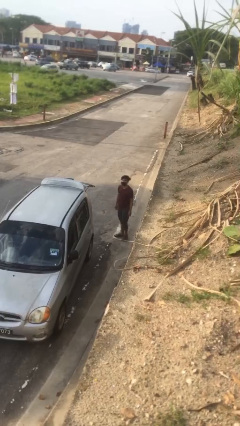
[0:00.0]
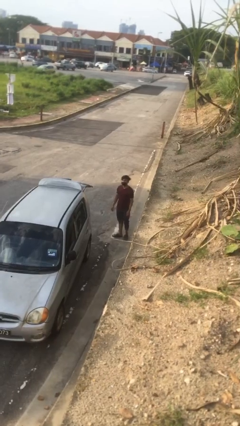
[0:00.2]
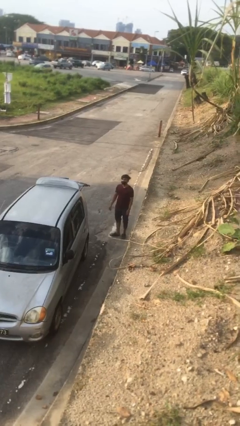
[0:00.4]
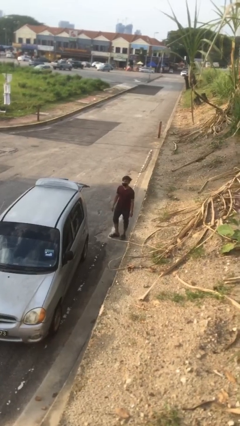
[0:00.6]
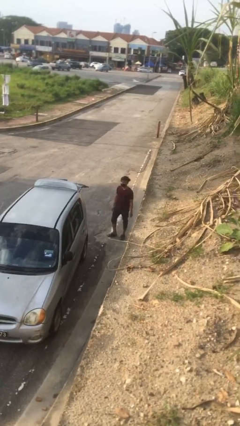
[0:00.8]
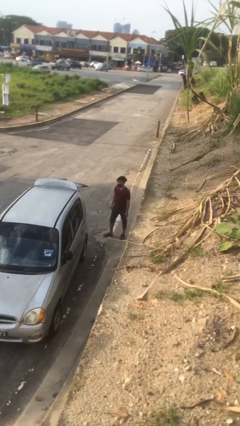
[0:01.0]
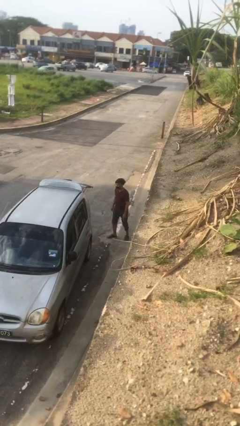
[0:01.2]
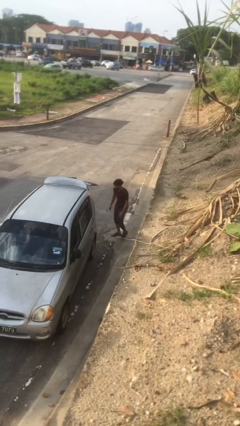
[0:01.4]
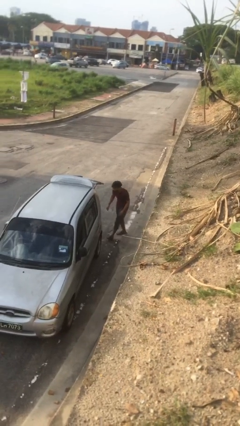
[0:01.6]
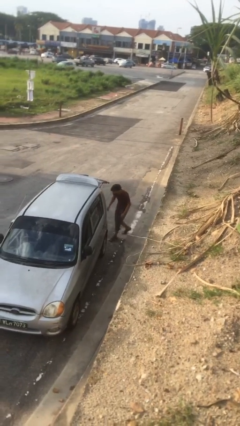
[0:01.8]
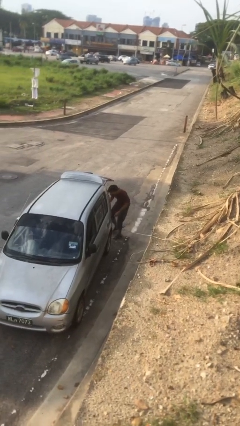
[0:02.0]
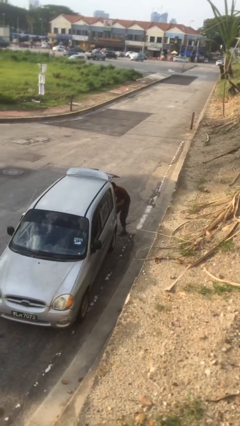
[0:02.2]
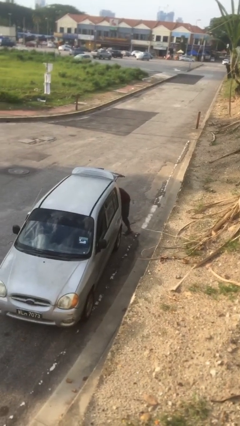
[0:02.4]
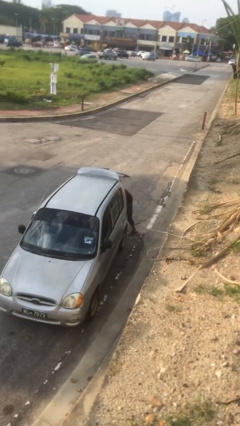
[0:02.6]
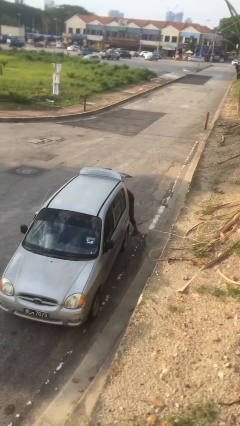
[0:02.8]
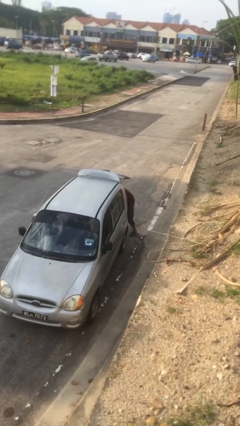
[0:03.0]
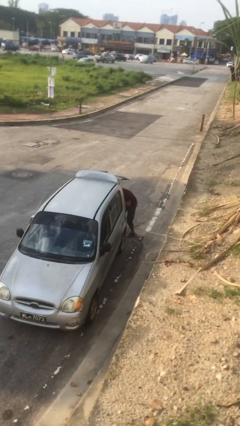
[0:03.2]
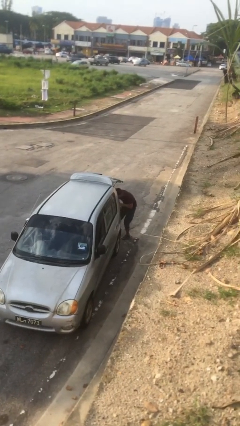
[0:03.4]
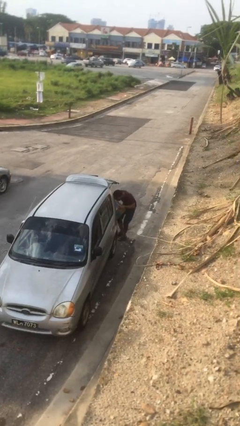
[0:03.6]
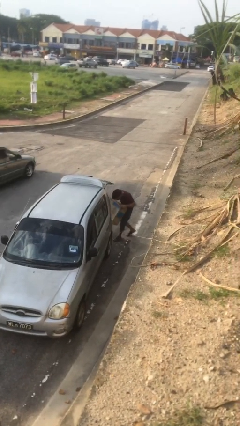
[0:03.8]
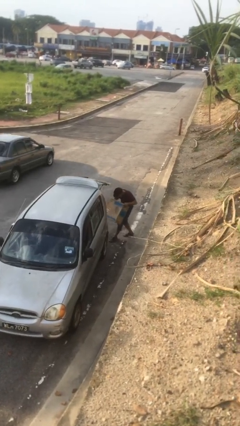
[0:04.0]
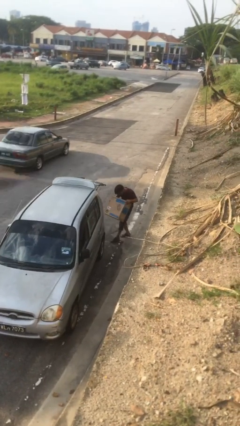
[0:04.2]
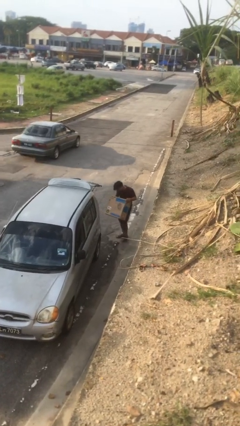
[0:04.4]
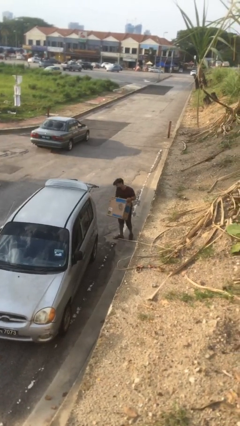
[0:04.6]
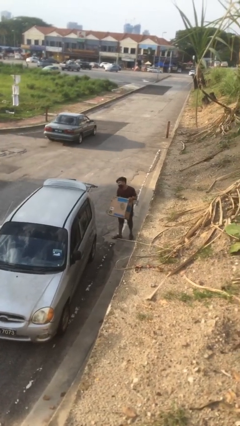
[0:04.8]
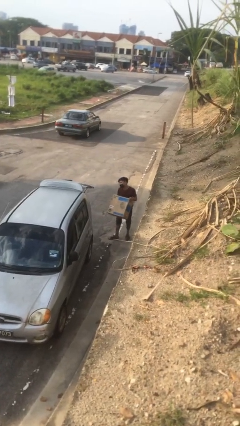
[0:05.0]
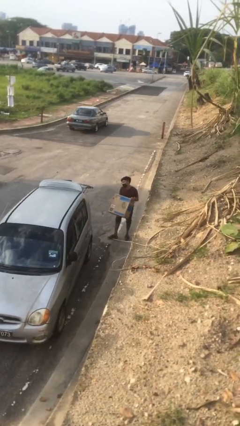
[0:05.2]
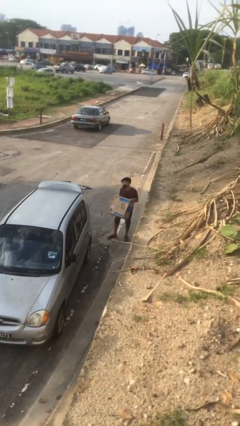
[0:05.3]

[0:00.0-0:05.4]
person unloads car

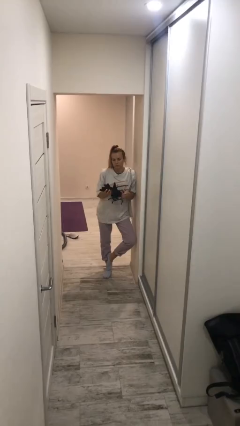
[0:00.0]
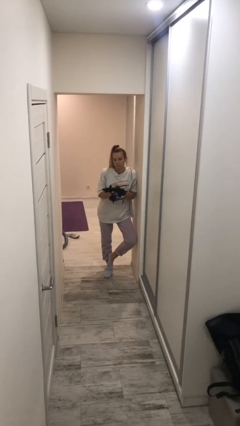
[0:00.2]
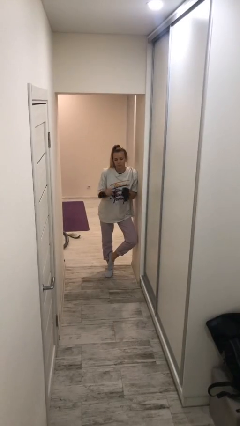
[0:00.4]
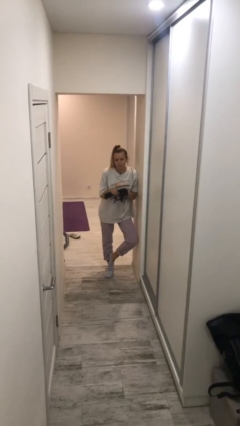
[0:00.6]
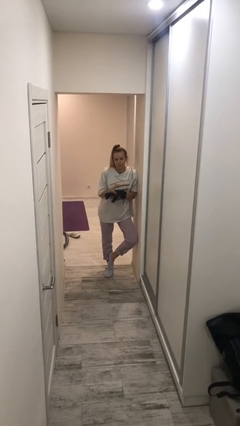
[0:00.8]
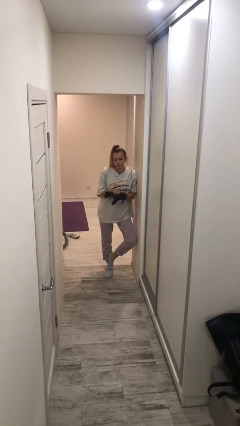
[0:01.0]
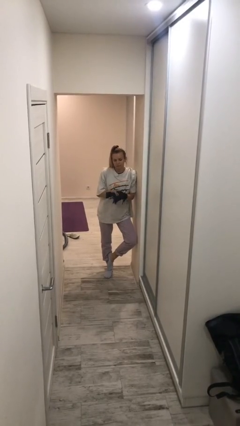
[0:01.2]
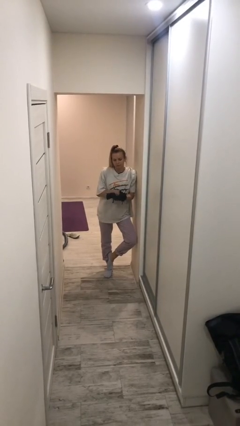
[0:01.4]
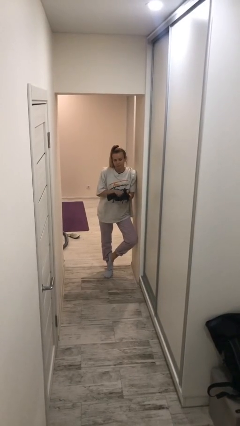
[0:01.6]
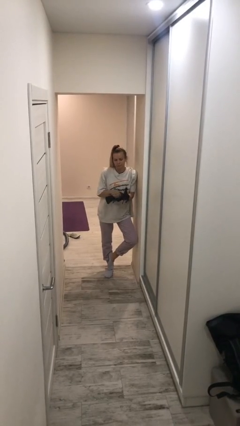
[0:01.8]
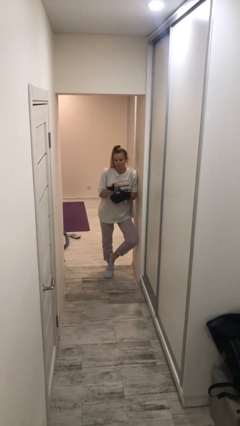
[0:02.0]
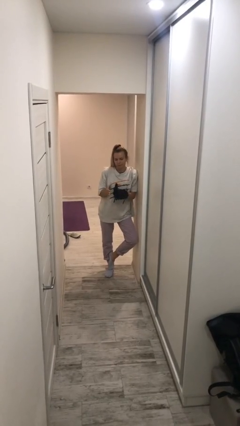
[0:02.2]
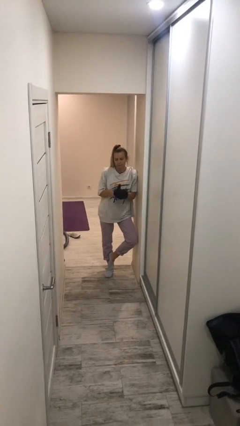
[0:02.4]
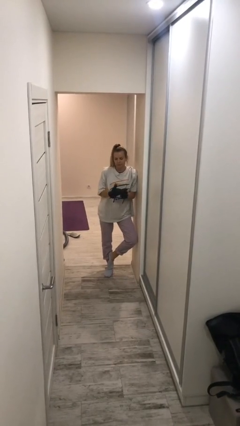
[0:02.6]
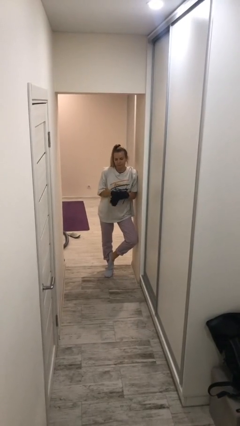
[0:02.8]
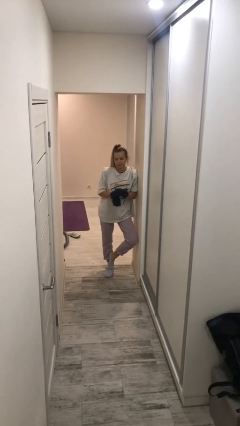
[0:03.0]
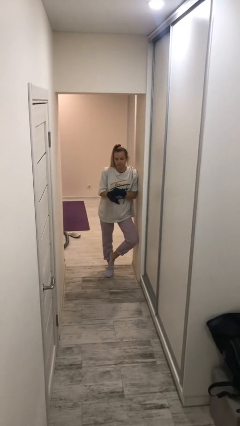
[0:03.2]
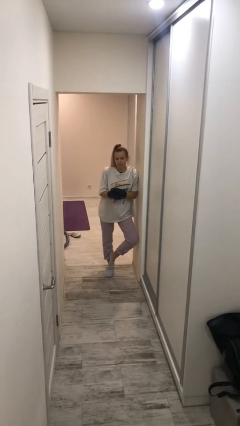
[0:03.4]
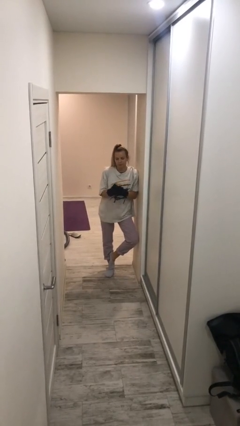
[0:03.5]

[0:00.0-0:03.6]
person puts on gloves

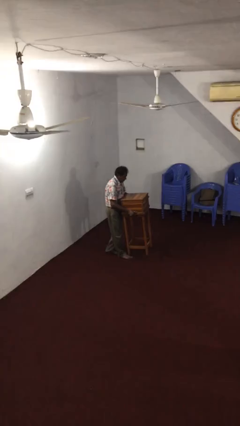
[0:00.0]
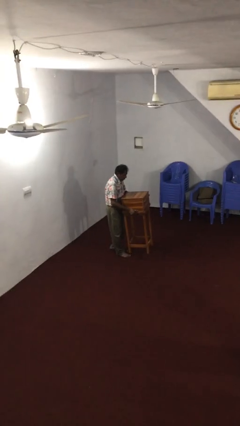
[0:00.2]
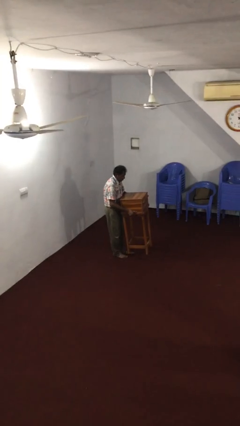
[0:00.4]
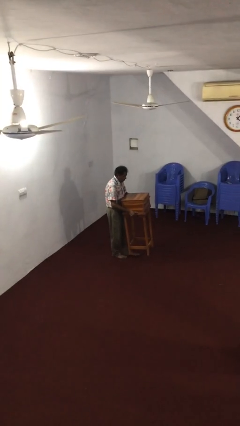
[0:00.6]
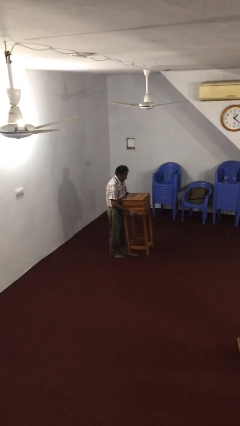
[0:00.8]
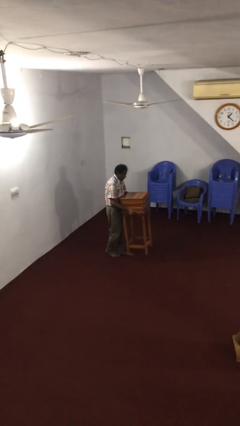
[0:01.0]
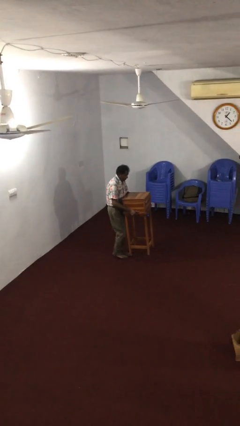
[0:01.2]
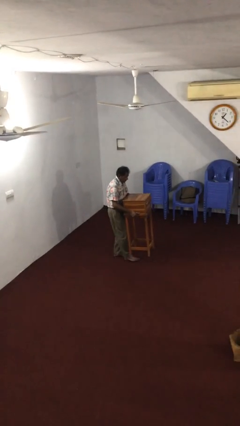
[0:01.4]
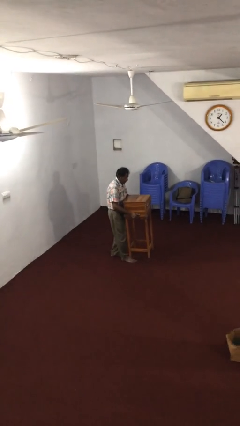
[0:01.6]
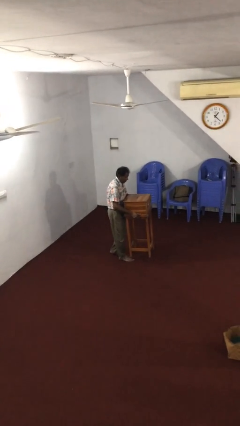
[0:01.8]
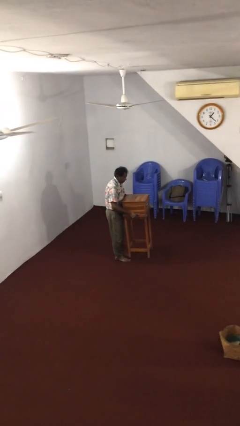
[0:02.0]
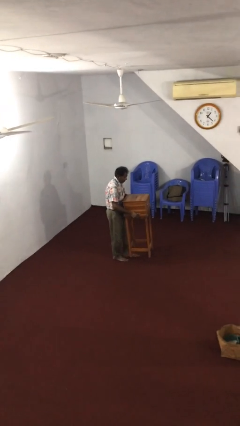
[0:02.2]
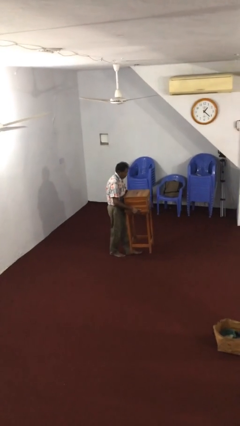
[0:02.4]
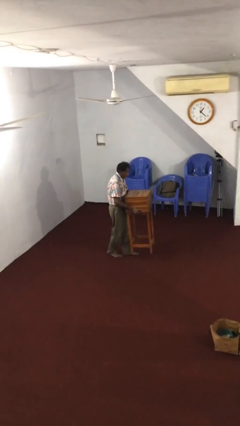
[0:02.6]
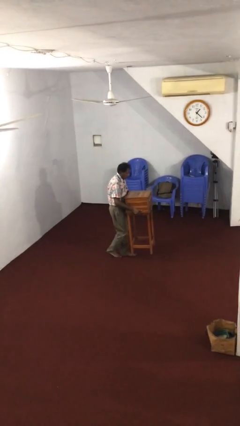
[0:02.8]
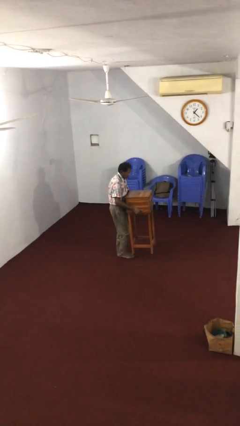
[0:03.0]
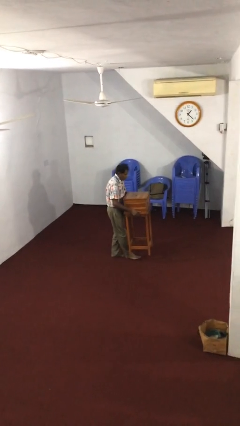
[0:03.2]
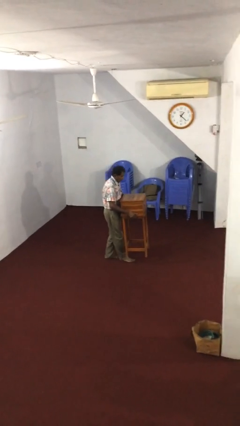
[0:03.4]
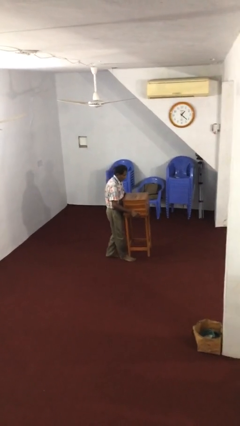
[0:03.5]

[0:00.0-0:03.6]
person carries heavy object

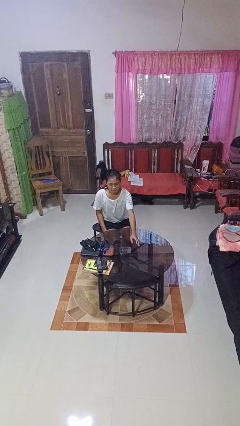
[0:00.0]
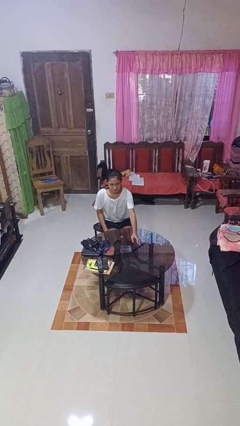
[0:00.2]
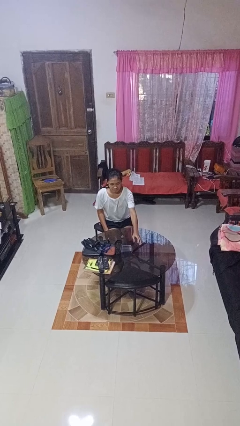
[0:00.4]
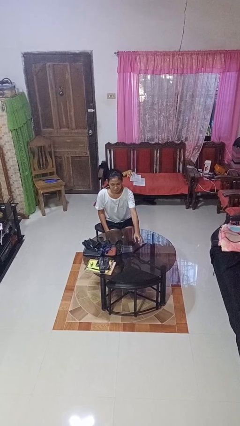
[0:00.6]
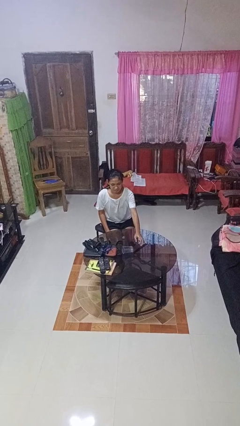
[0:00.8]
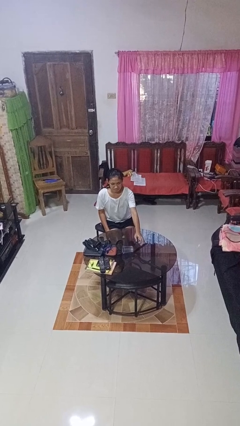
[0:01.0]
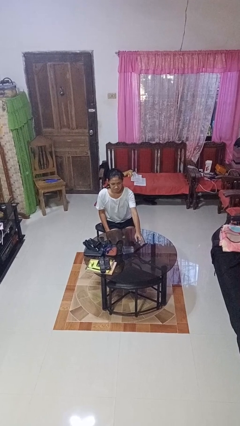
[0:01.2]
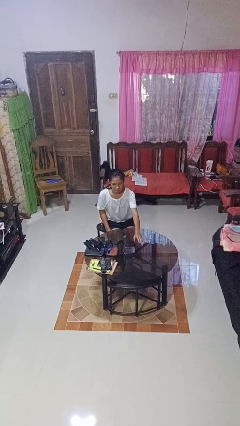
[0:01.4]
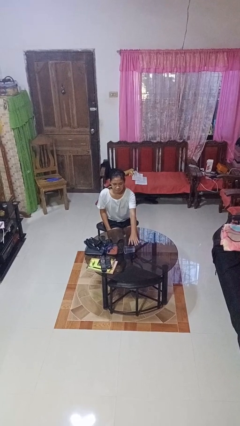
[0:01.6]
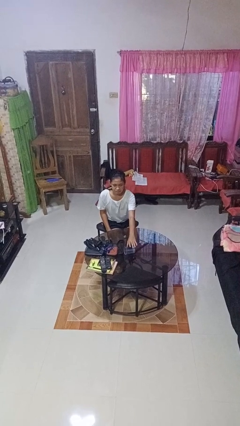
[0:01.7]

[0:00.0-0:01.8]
person knocks over glass

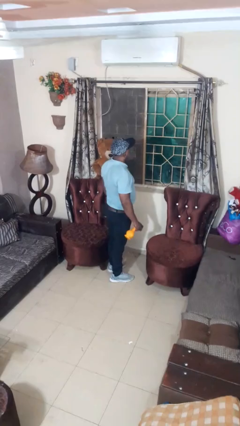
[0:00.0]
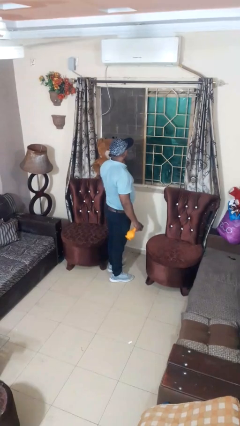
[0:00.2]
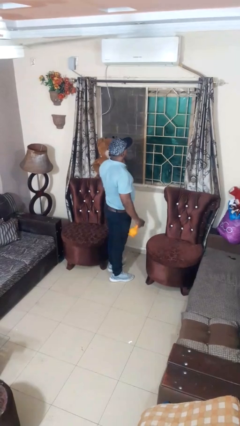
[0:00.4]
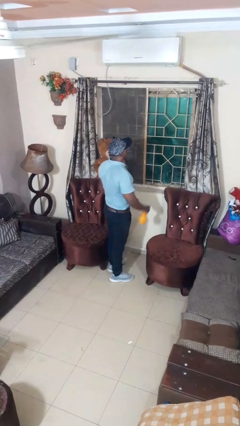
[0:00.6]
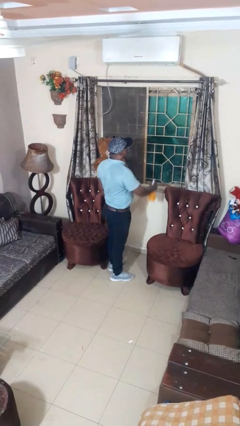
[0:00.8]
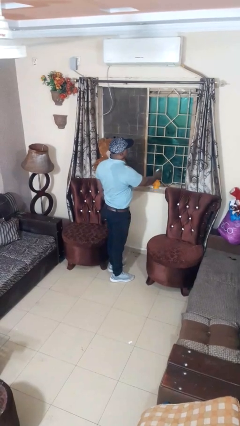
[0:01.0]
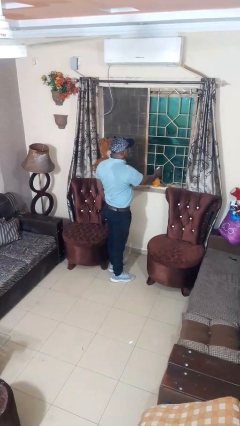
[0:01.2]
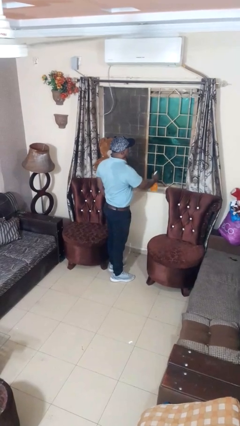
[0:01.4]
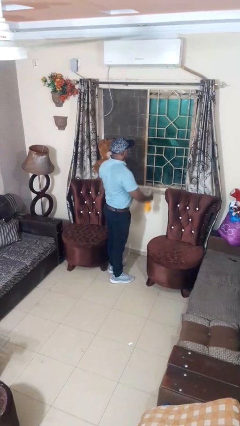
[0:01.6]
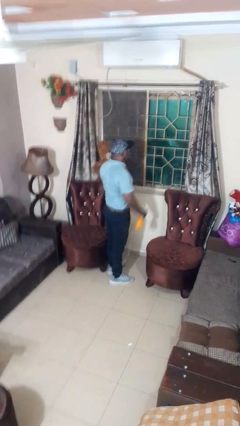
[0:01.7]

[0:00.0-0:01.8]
person sprays from bottle

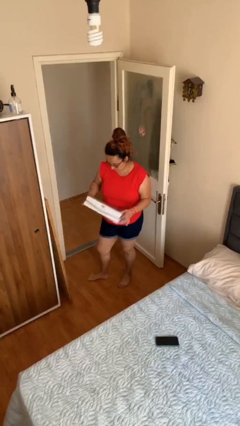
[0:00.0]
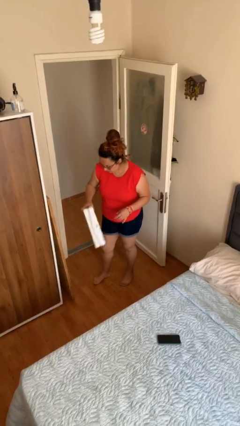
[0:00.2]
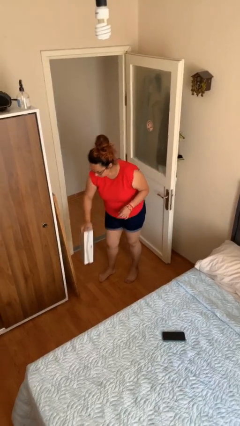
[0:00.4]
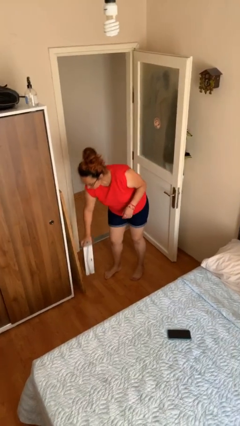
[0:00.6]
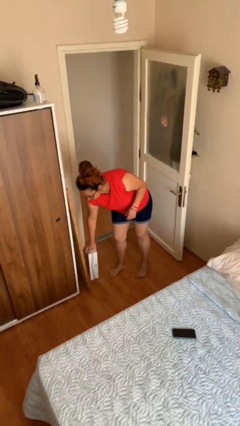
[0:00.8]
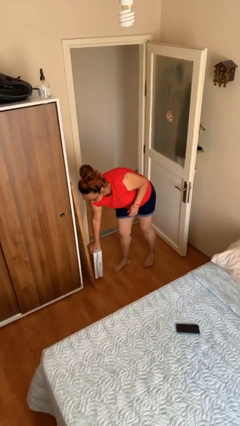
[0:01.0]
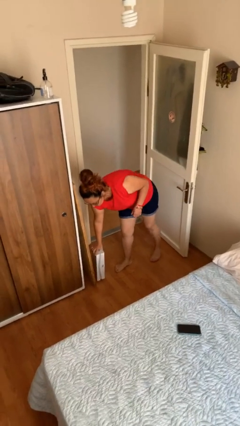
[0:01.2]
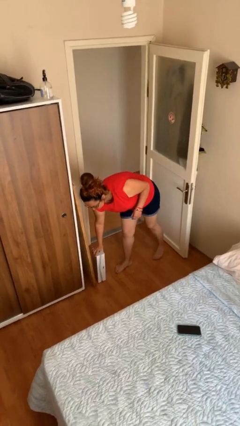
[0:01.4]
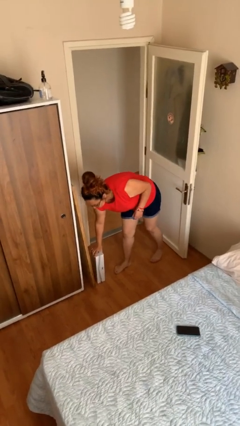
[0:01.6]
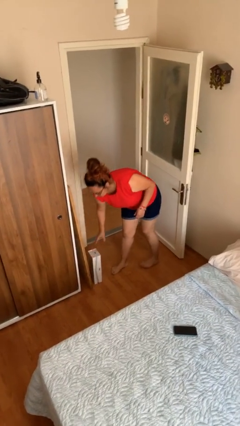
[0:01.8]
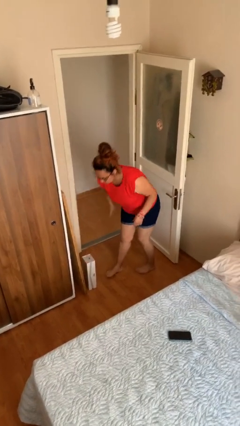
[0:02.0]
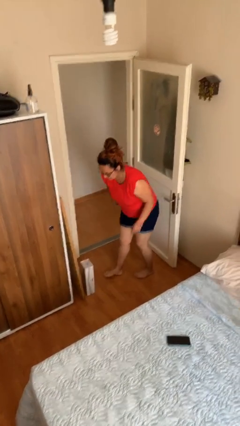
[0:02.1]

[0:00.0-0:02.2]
person puts down object on floor
